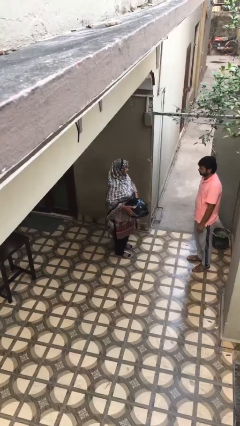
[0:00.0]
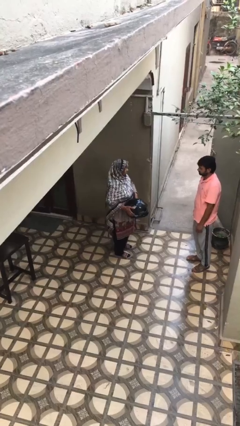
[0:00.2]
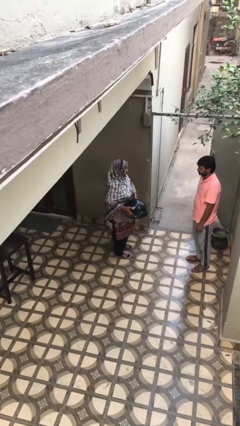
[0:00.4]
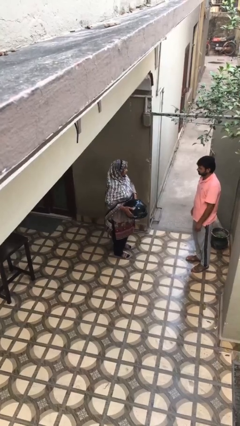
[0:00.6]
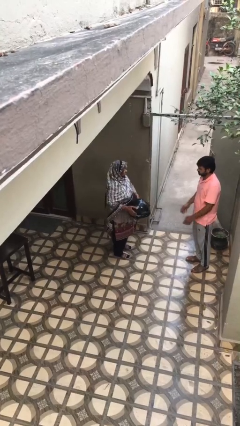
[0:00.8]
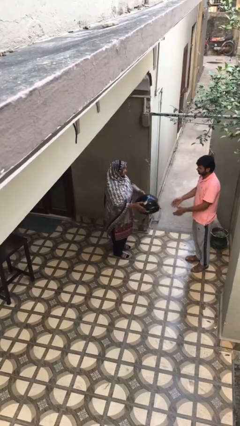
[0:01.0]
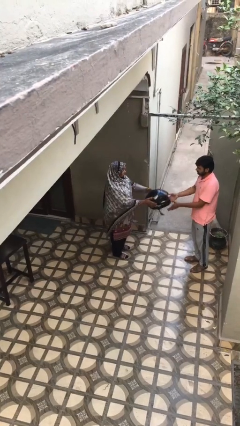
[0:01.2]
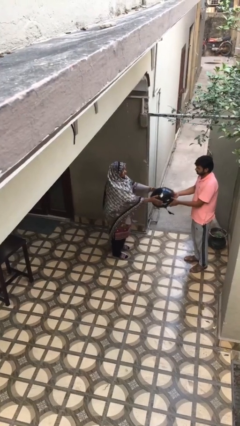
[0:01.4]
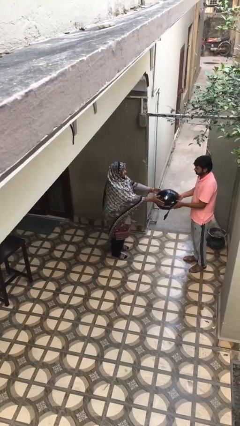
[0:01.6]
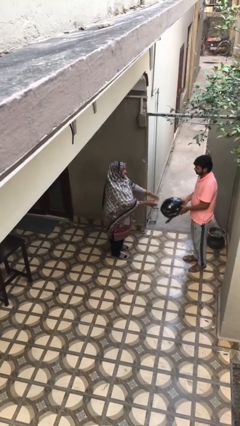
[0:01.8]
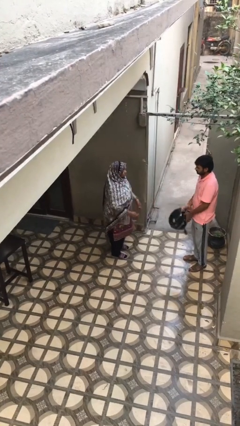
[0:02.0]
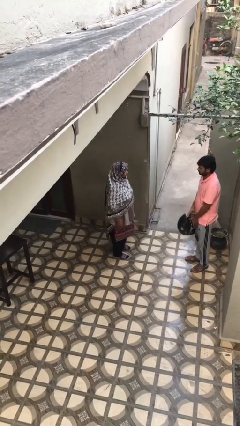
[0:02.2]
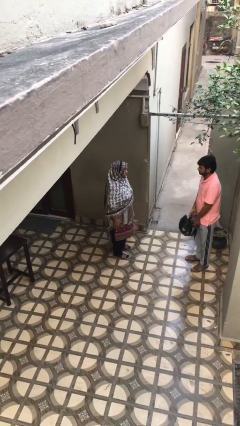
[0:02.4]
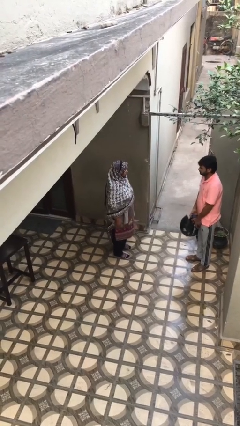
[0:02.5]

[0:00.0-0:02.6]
person transfers object to person

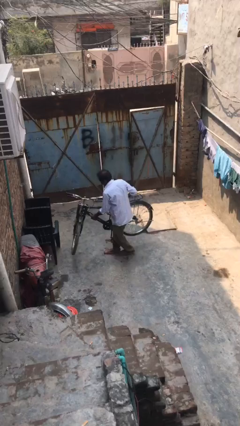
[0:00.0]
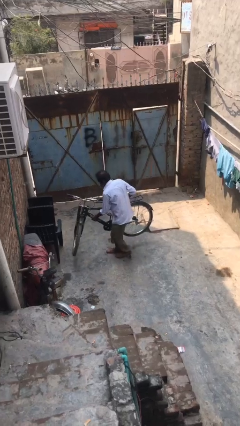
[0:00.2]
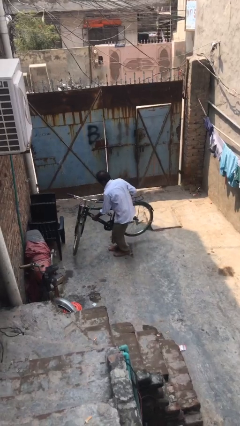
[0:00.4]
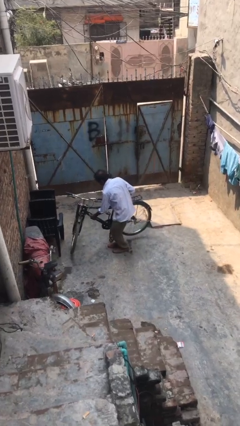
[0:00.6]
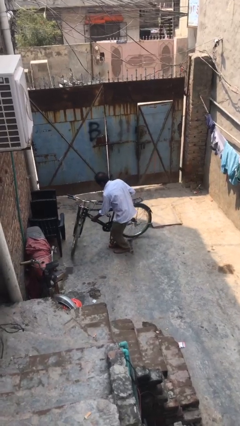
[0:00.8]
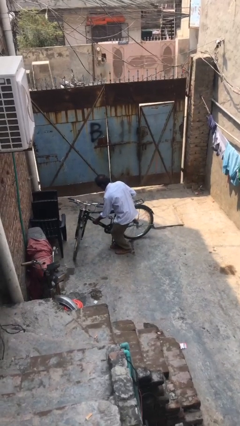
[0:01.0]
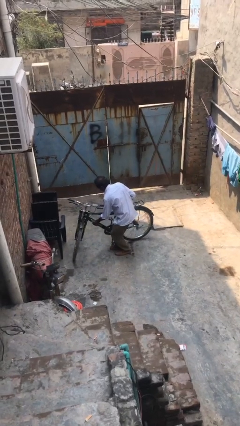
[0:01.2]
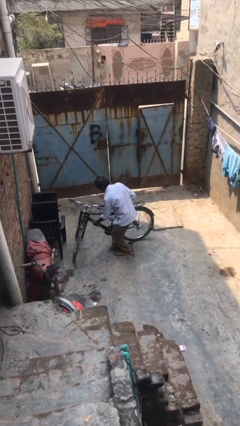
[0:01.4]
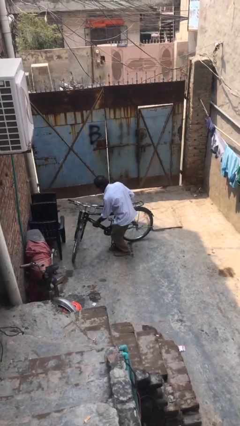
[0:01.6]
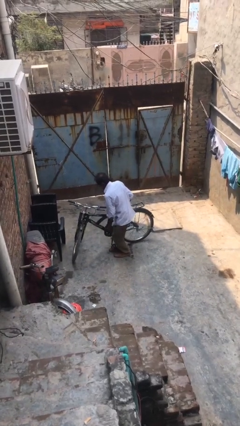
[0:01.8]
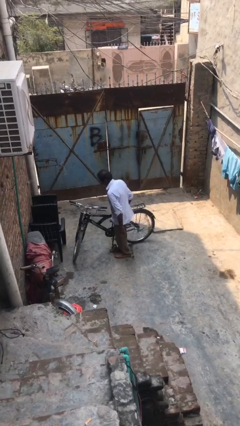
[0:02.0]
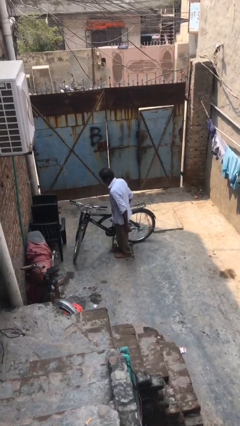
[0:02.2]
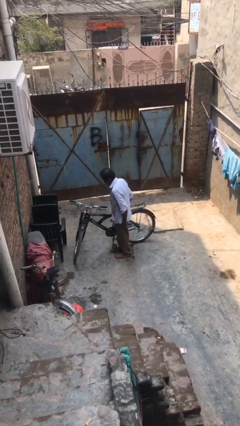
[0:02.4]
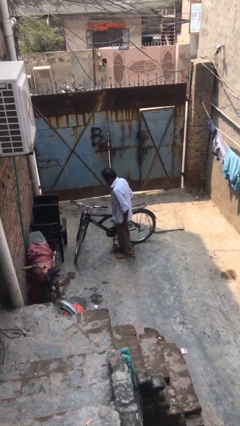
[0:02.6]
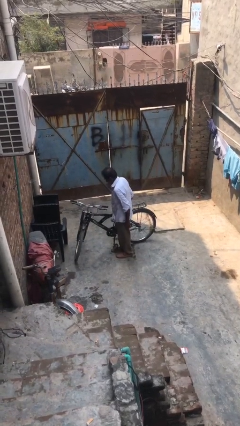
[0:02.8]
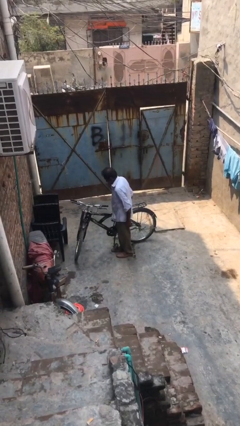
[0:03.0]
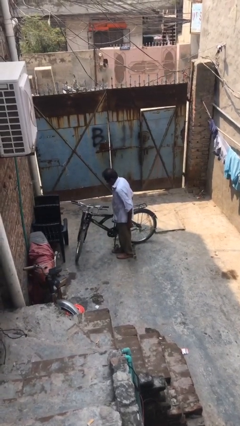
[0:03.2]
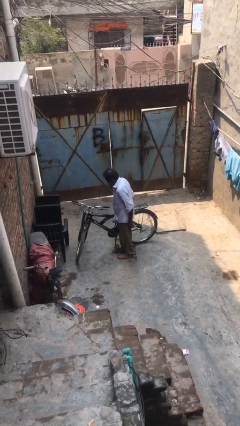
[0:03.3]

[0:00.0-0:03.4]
person puts down object on floor

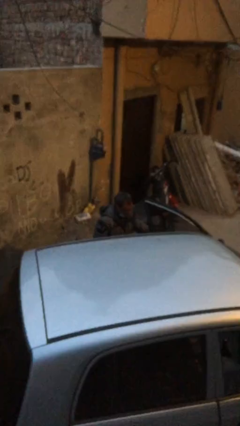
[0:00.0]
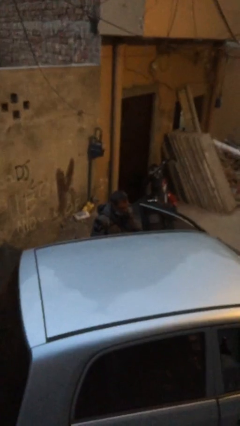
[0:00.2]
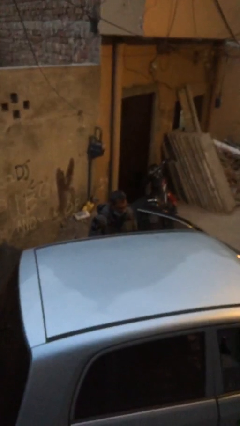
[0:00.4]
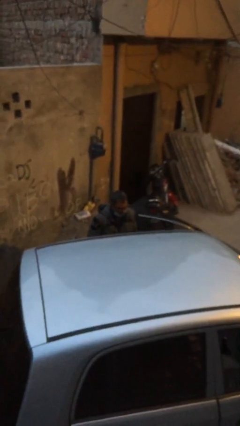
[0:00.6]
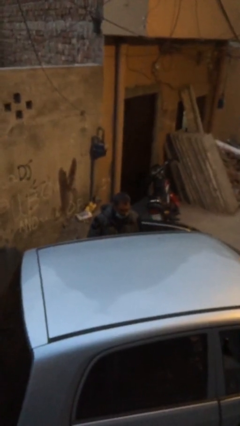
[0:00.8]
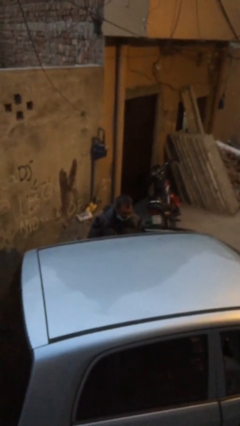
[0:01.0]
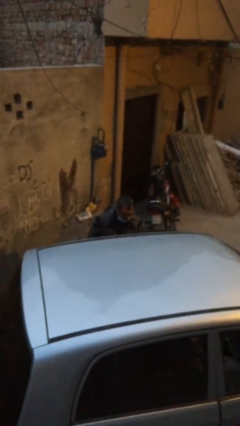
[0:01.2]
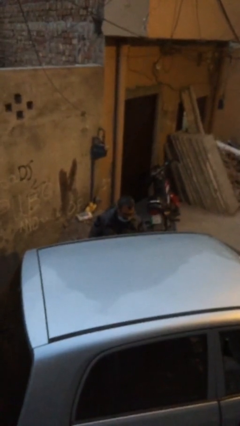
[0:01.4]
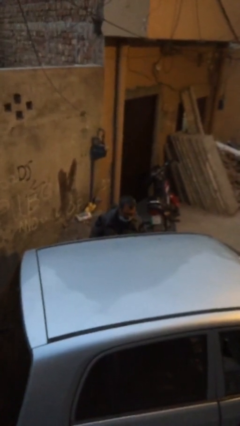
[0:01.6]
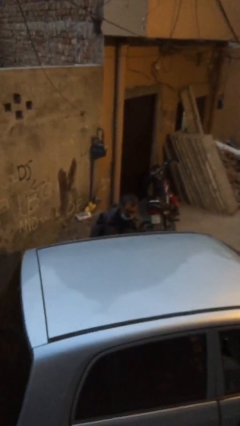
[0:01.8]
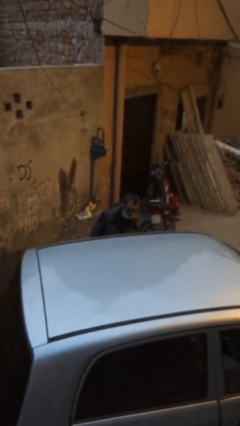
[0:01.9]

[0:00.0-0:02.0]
person closes car door

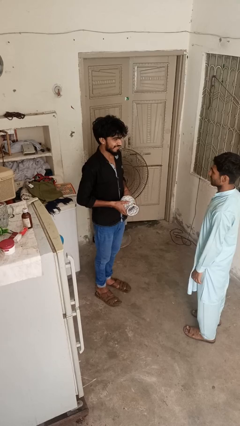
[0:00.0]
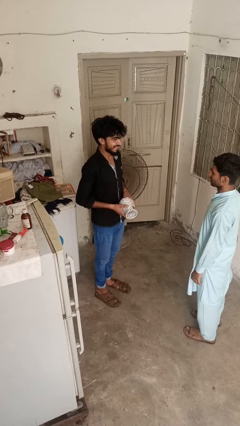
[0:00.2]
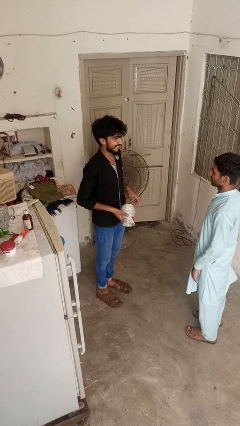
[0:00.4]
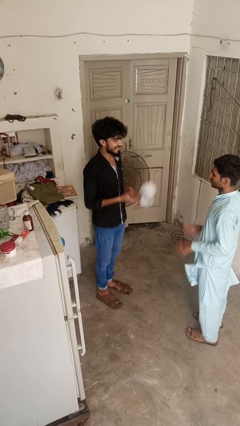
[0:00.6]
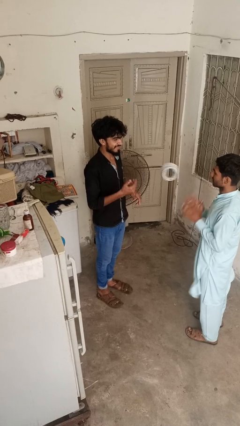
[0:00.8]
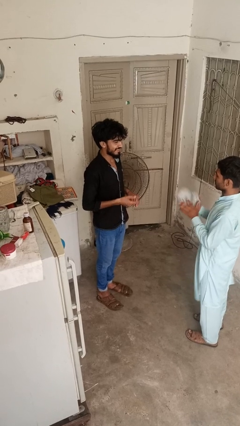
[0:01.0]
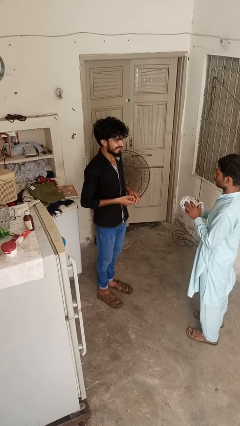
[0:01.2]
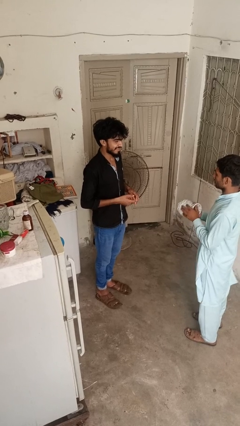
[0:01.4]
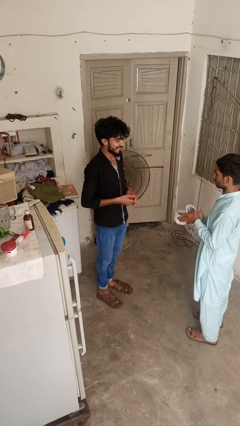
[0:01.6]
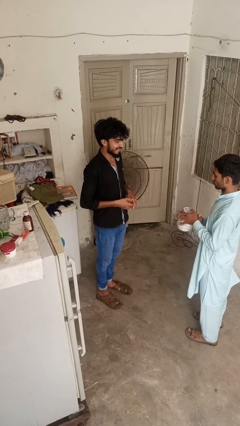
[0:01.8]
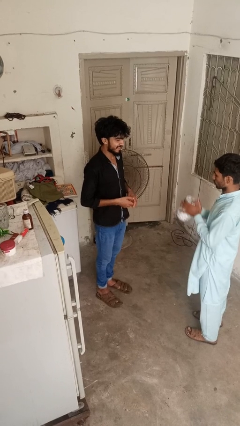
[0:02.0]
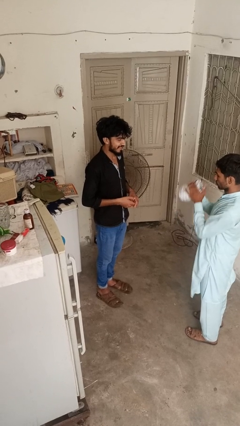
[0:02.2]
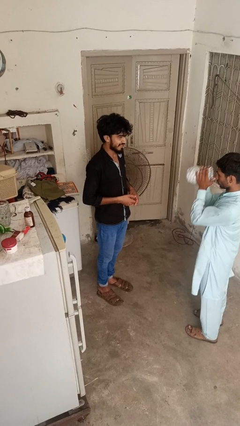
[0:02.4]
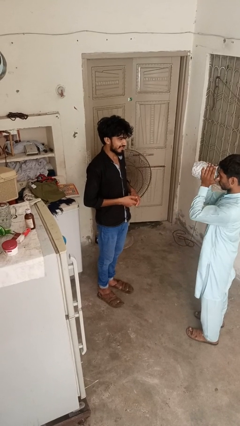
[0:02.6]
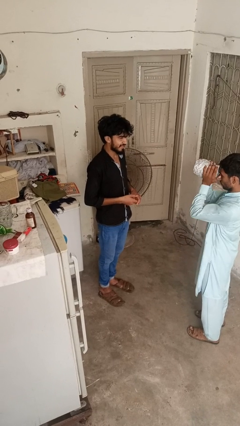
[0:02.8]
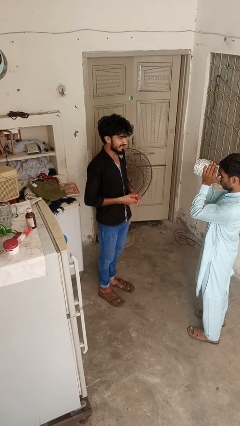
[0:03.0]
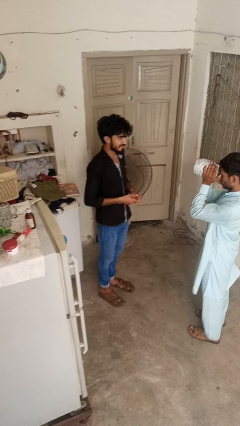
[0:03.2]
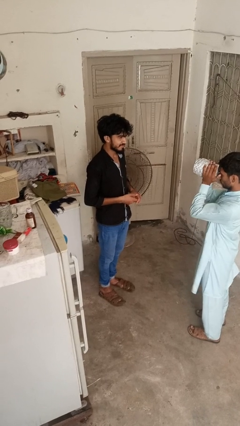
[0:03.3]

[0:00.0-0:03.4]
person throws object to person

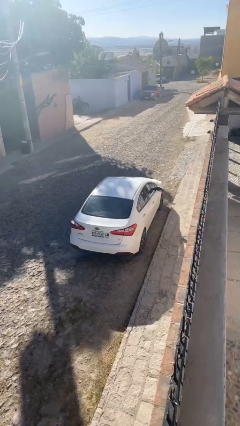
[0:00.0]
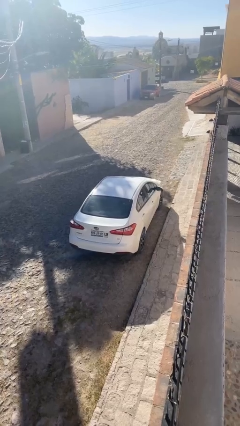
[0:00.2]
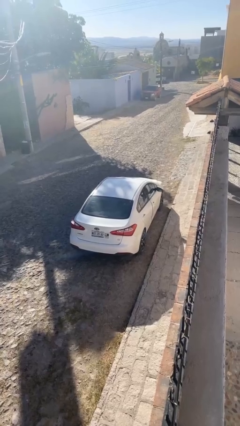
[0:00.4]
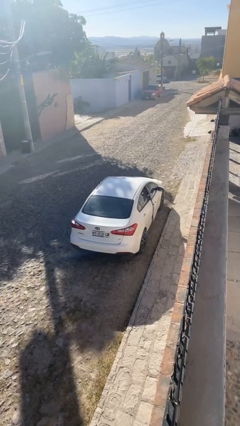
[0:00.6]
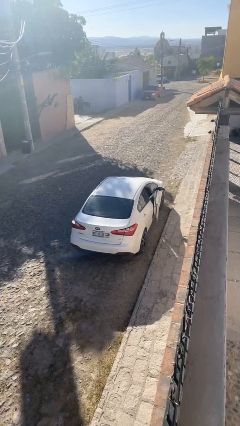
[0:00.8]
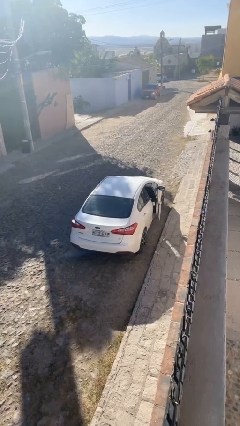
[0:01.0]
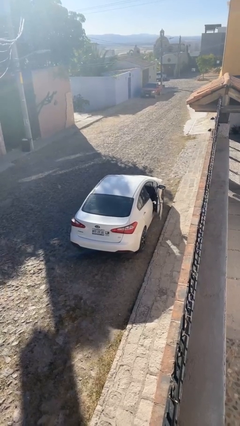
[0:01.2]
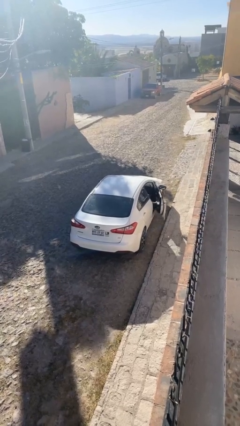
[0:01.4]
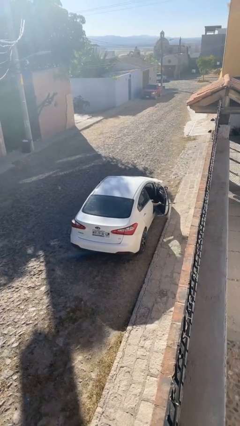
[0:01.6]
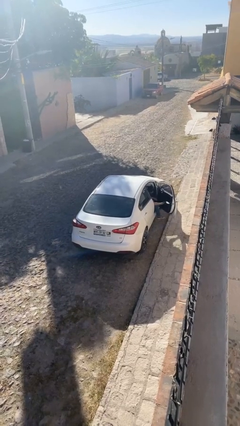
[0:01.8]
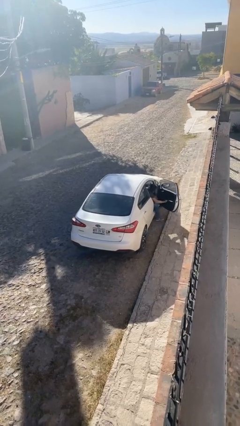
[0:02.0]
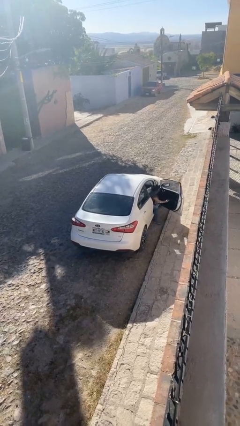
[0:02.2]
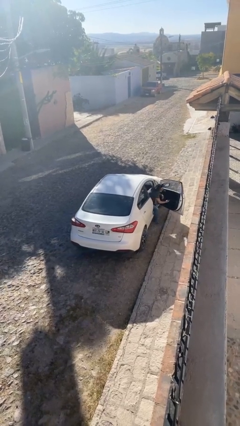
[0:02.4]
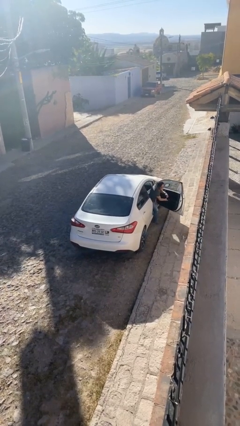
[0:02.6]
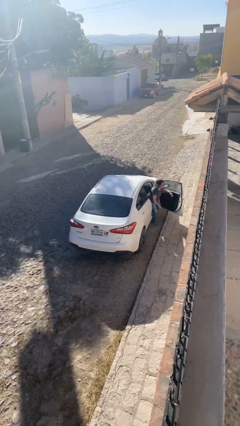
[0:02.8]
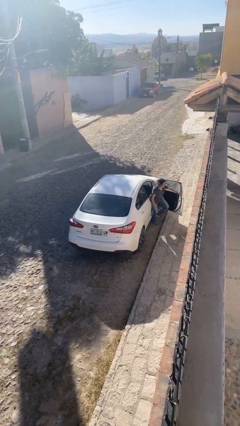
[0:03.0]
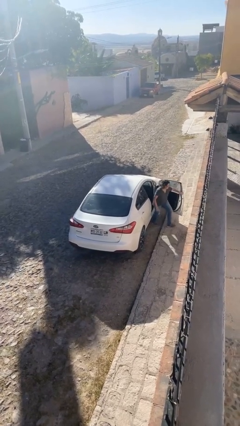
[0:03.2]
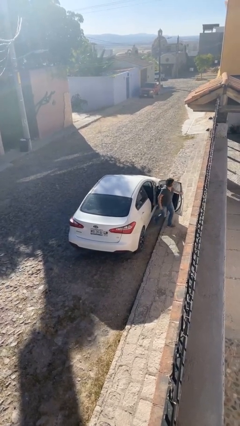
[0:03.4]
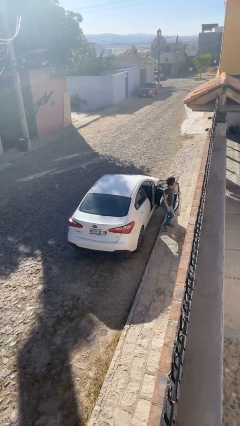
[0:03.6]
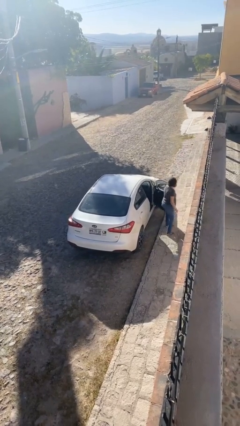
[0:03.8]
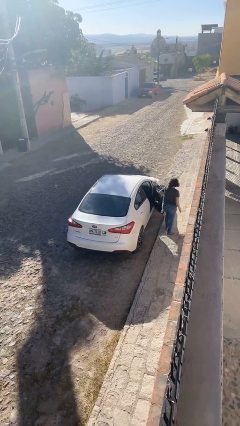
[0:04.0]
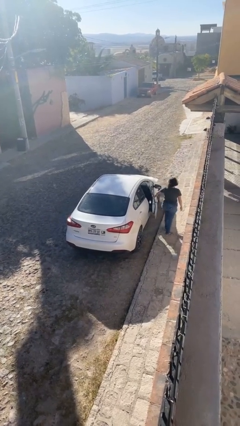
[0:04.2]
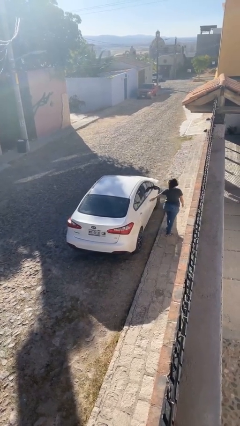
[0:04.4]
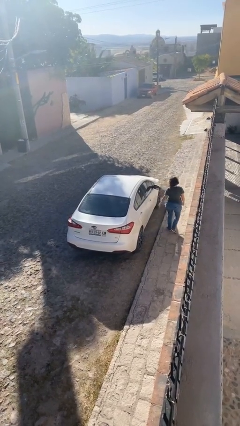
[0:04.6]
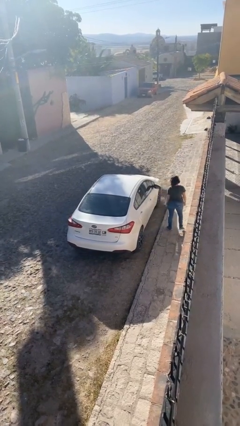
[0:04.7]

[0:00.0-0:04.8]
car drops off person

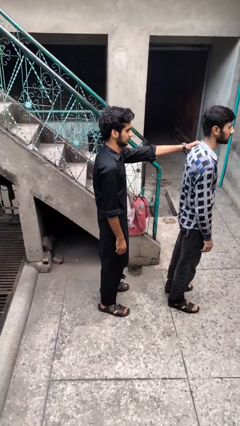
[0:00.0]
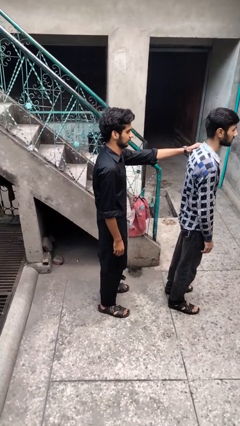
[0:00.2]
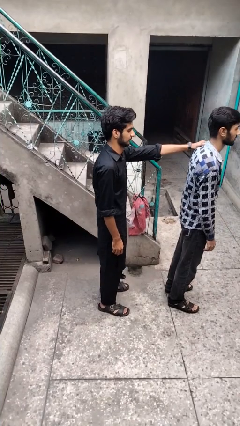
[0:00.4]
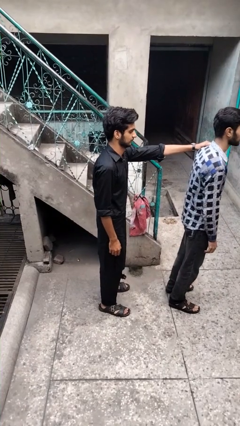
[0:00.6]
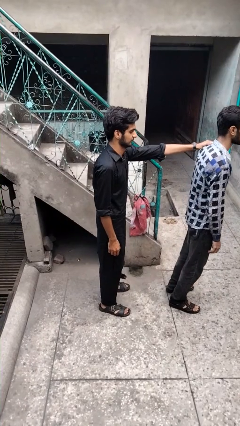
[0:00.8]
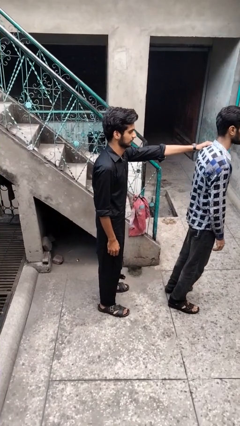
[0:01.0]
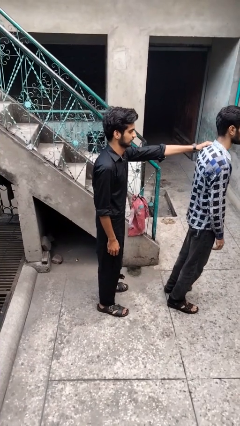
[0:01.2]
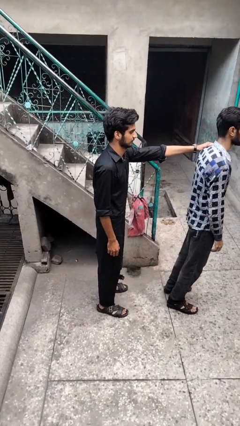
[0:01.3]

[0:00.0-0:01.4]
person grabs person by shoulder

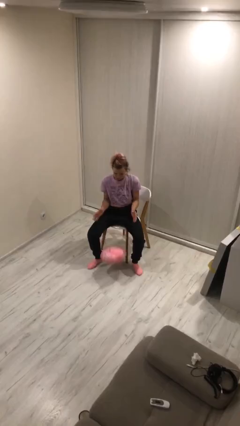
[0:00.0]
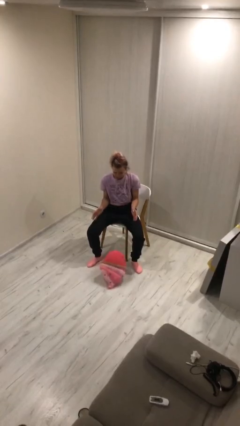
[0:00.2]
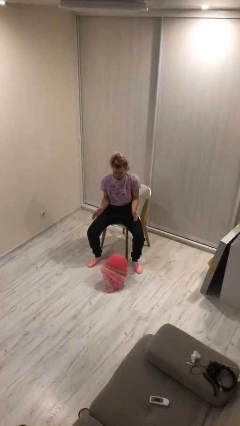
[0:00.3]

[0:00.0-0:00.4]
person drops object
